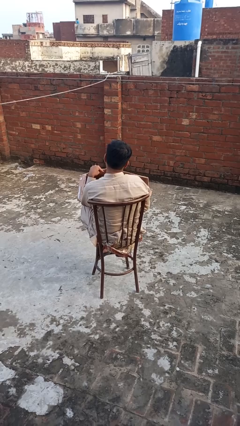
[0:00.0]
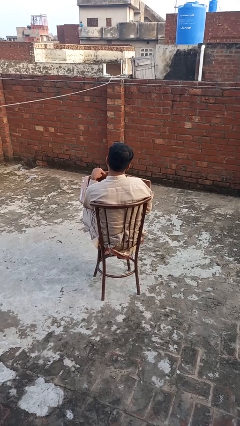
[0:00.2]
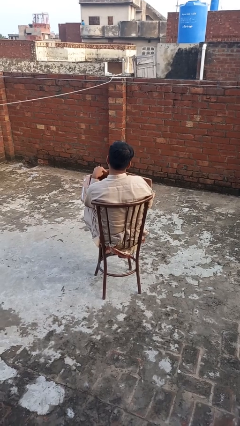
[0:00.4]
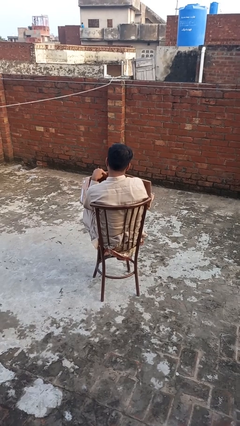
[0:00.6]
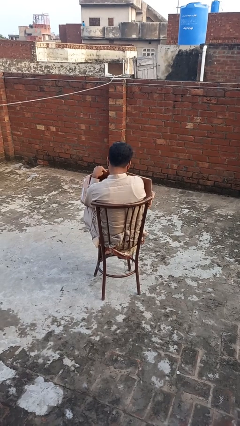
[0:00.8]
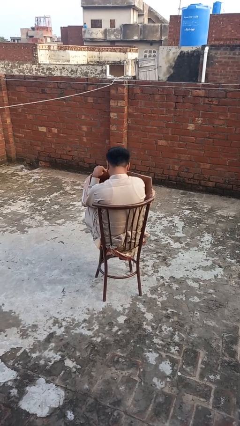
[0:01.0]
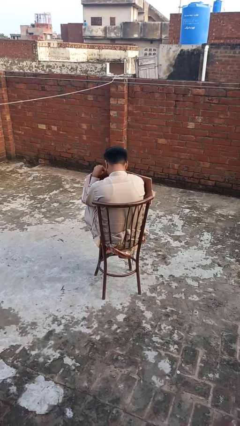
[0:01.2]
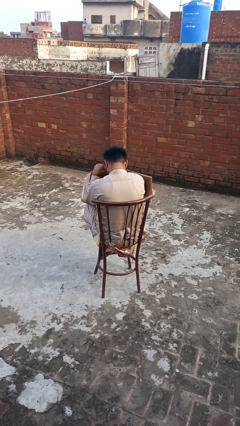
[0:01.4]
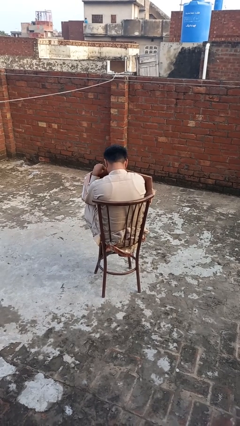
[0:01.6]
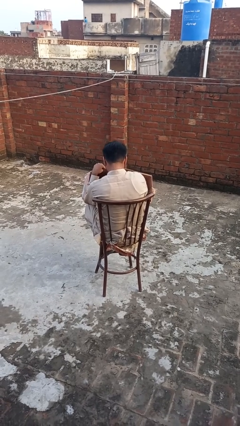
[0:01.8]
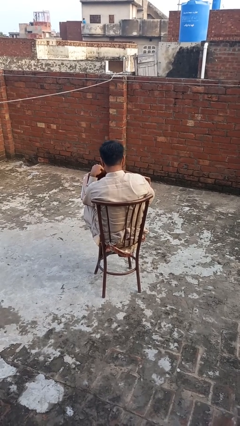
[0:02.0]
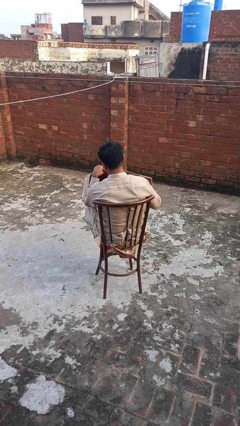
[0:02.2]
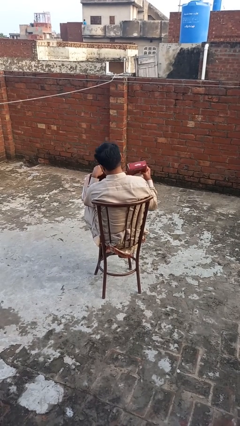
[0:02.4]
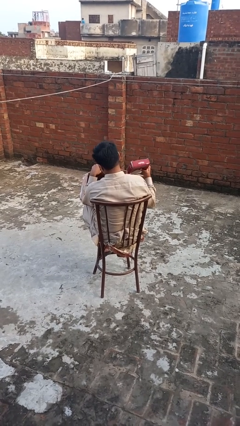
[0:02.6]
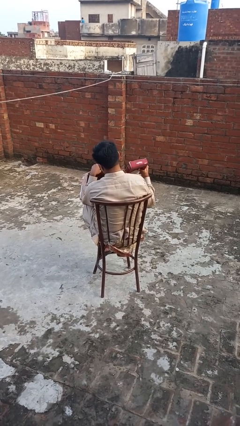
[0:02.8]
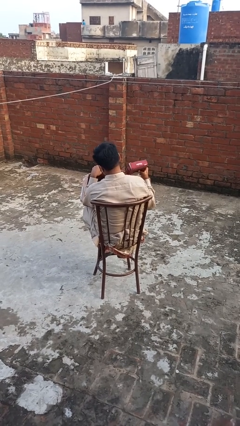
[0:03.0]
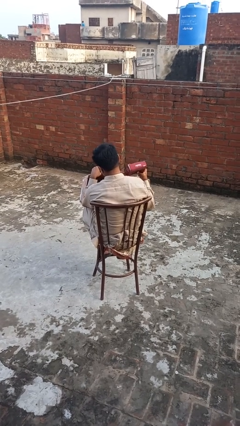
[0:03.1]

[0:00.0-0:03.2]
person searches in box

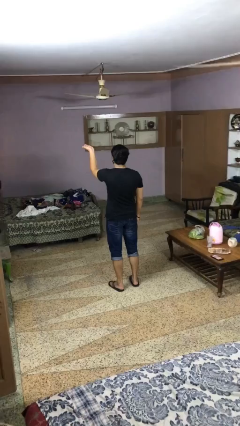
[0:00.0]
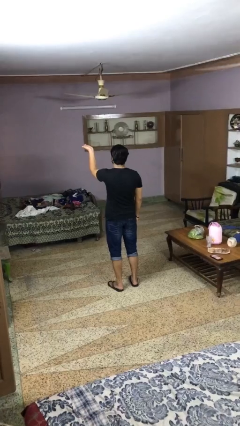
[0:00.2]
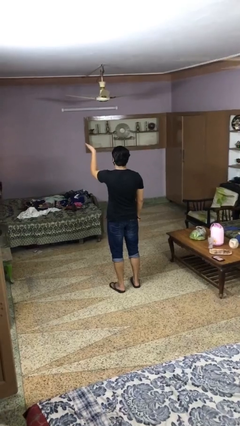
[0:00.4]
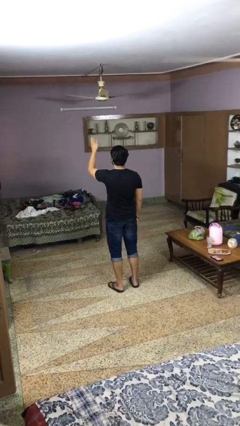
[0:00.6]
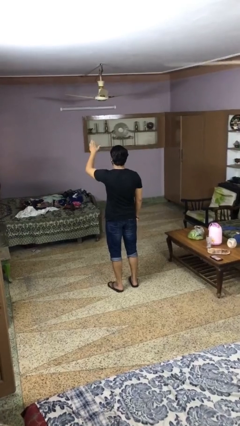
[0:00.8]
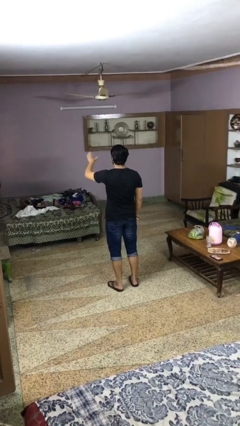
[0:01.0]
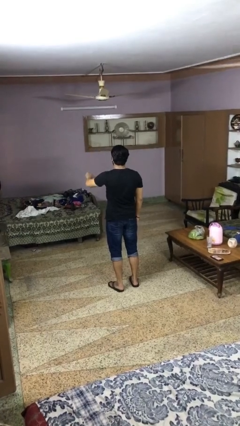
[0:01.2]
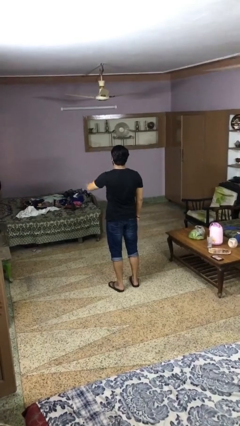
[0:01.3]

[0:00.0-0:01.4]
person gestures swipe down

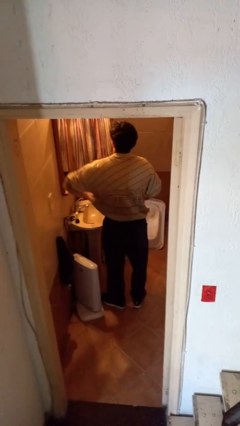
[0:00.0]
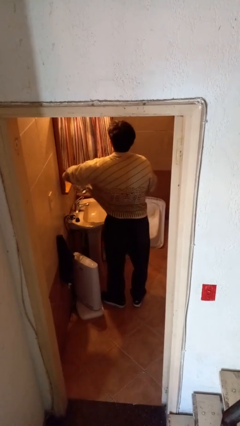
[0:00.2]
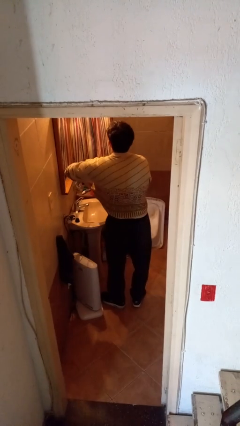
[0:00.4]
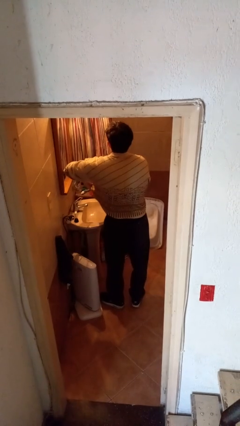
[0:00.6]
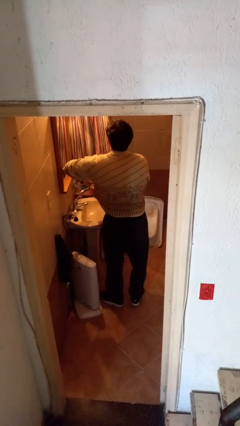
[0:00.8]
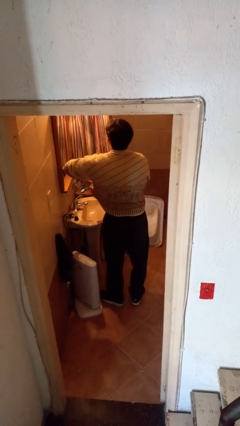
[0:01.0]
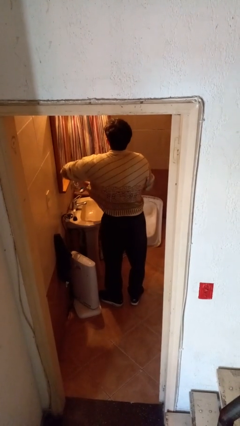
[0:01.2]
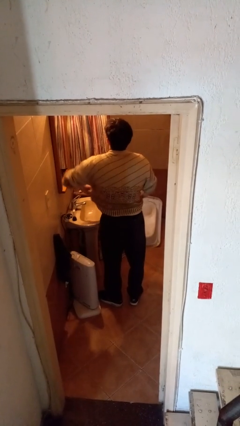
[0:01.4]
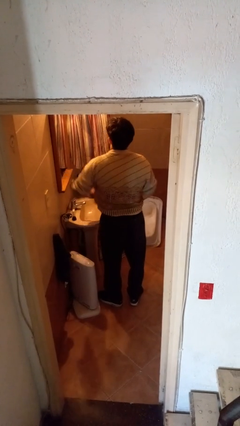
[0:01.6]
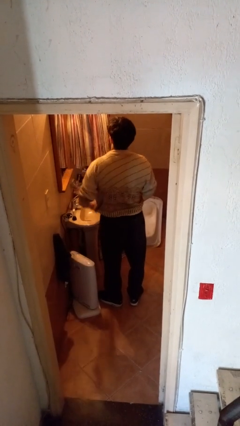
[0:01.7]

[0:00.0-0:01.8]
person applies deodorant

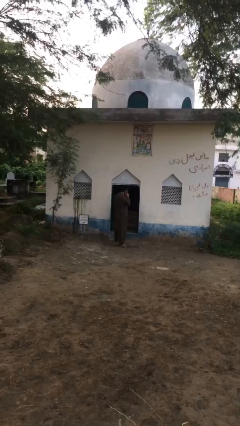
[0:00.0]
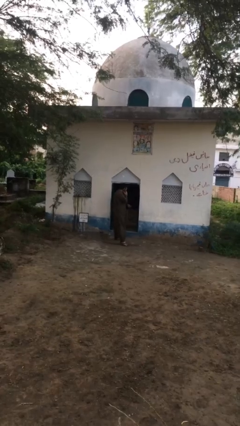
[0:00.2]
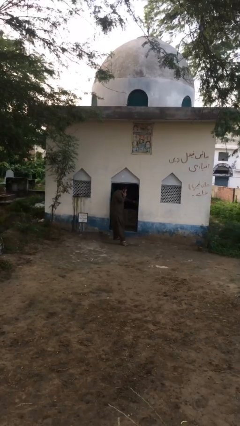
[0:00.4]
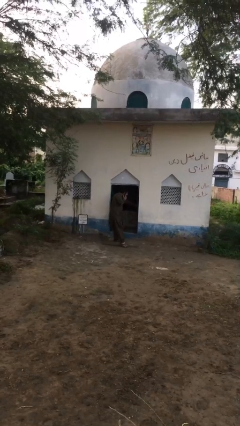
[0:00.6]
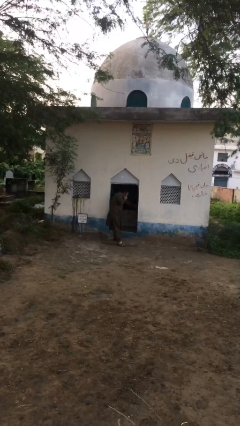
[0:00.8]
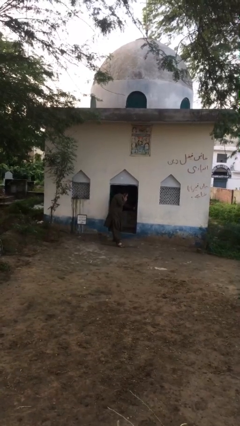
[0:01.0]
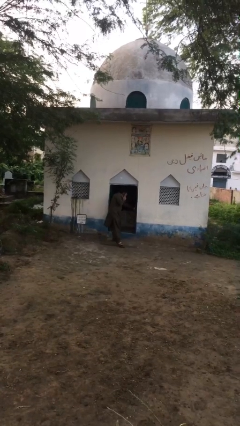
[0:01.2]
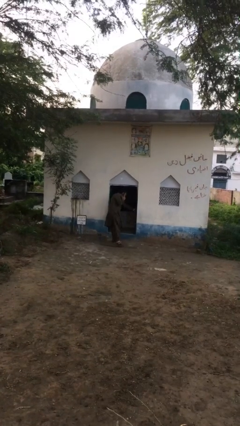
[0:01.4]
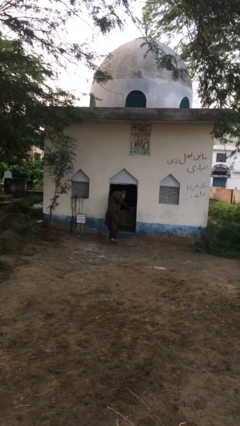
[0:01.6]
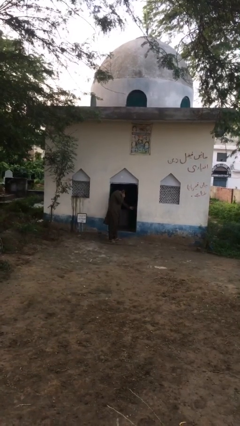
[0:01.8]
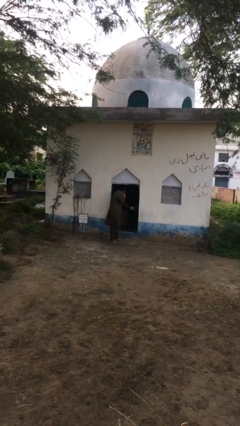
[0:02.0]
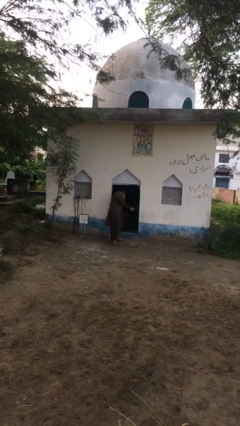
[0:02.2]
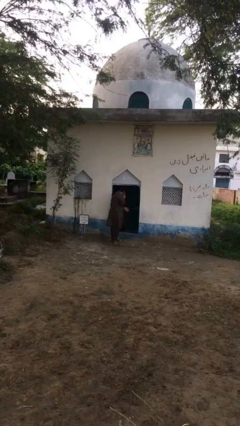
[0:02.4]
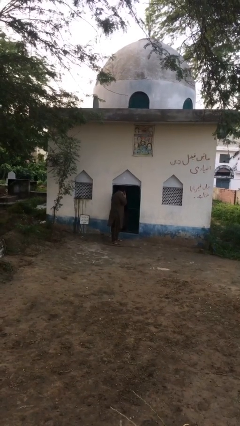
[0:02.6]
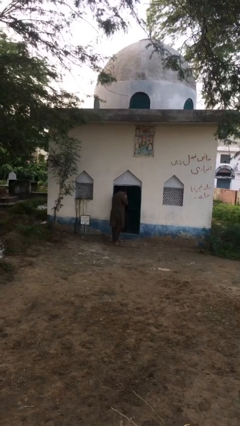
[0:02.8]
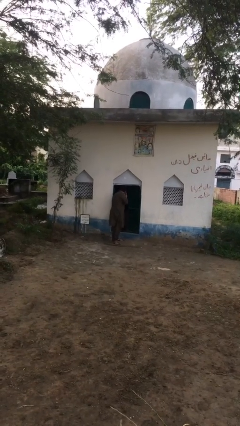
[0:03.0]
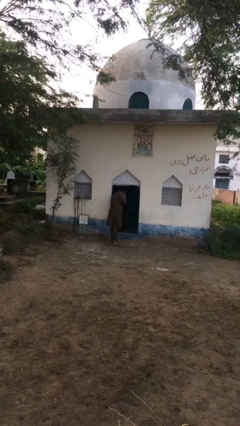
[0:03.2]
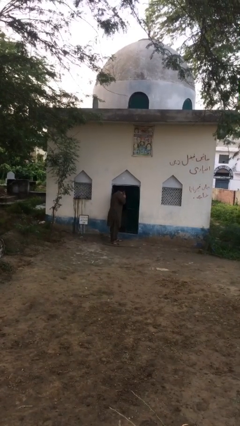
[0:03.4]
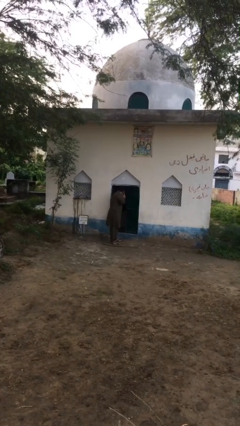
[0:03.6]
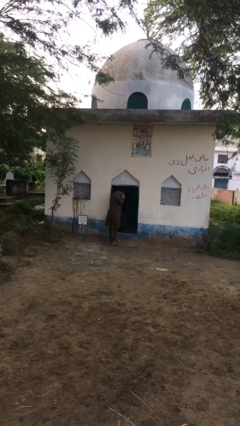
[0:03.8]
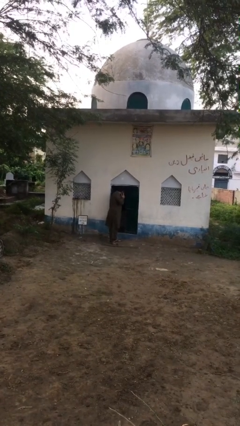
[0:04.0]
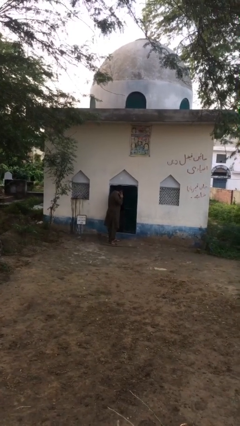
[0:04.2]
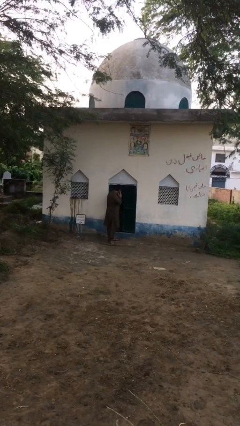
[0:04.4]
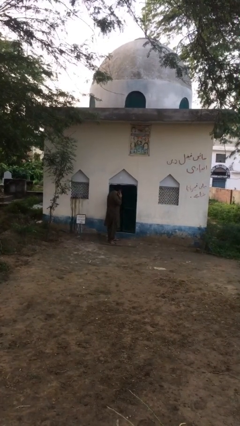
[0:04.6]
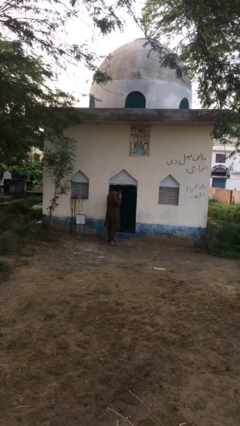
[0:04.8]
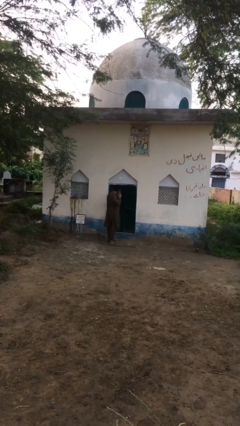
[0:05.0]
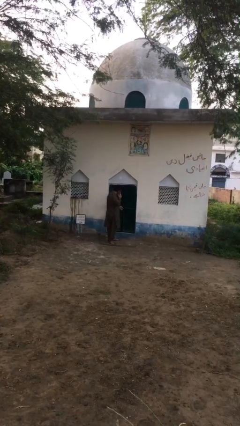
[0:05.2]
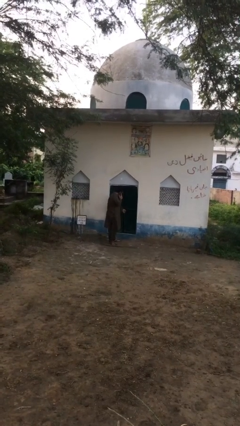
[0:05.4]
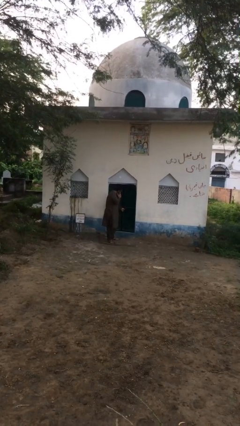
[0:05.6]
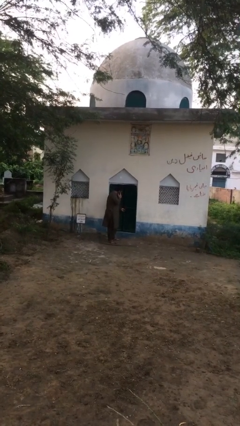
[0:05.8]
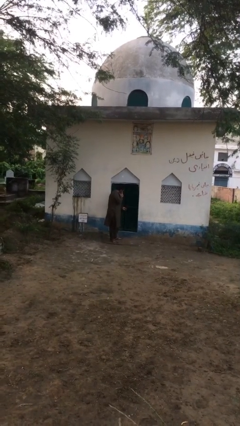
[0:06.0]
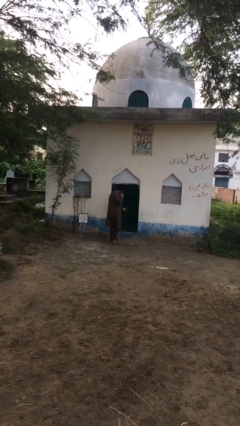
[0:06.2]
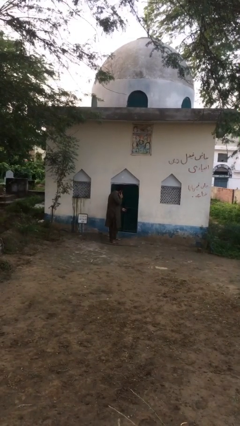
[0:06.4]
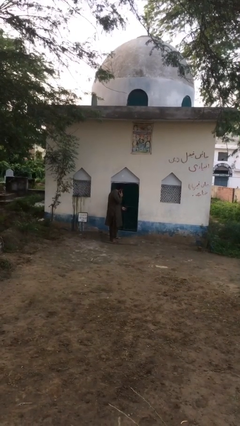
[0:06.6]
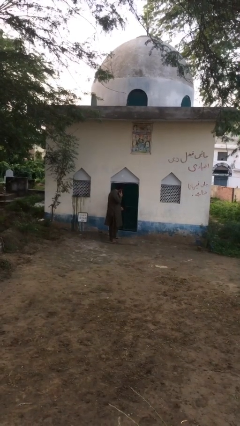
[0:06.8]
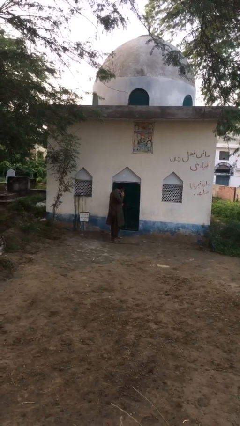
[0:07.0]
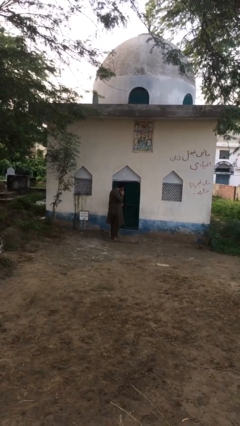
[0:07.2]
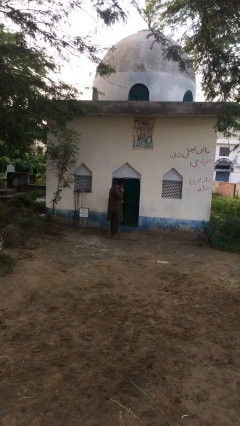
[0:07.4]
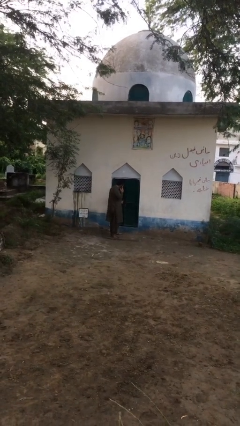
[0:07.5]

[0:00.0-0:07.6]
person closes facility door

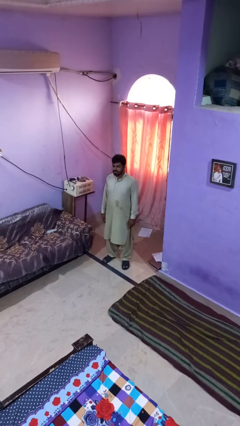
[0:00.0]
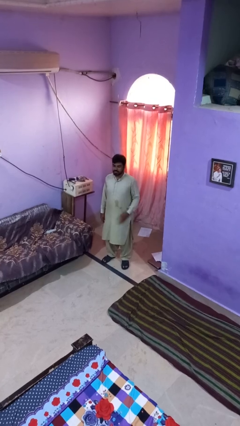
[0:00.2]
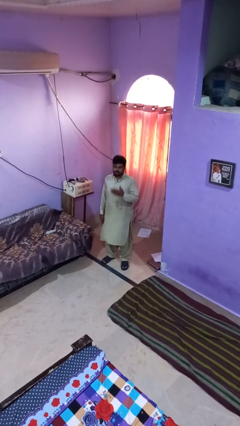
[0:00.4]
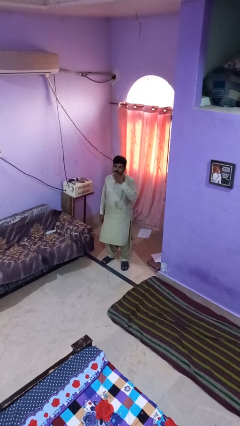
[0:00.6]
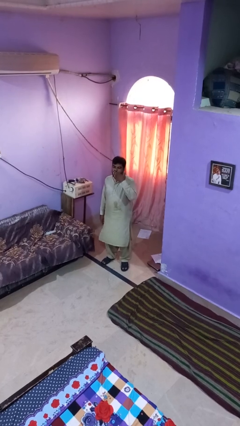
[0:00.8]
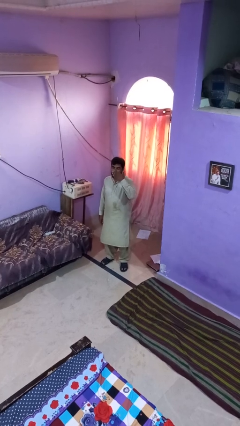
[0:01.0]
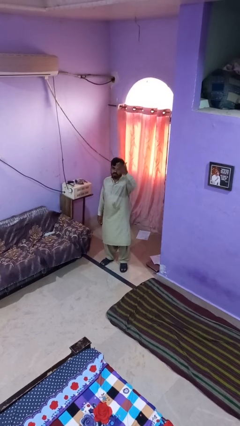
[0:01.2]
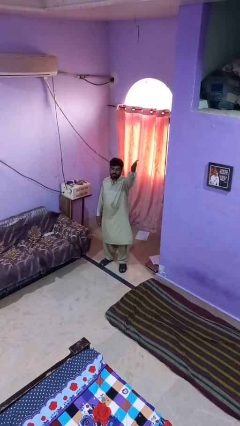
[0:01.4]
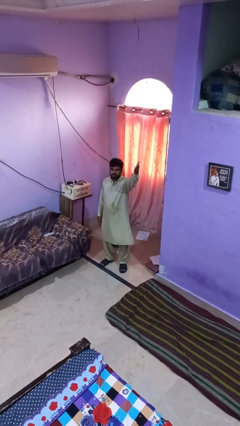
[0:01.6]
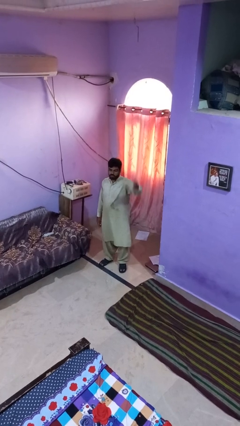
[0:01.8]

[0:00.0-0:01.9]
person gestures blow kiss

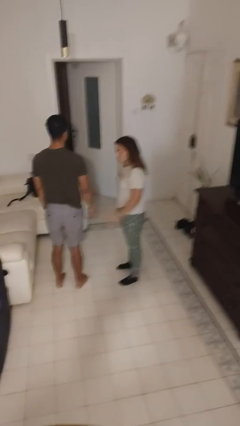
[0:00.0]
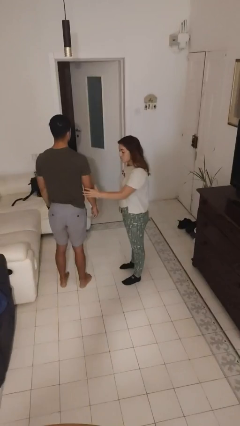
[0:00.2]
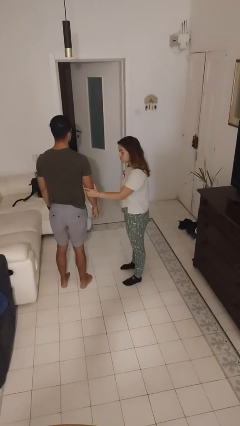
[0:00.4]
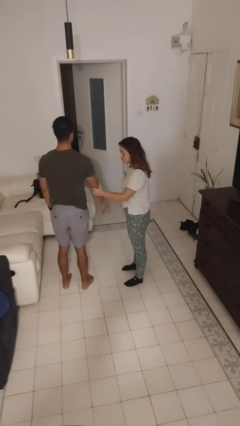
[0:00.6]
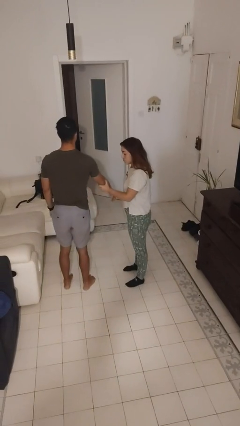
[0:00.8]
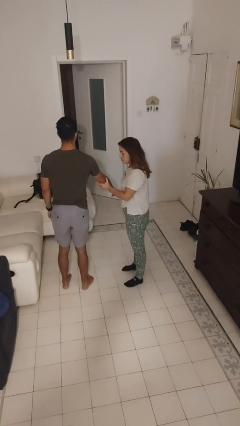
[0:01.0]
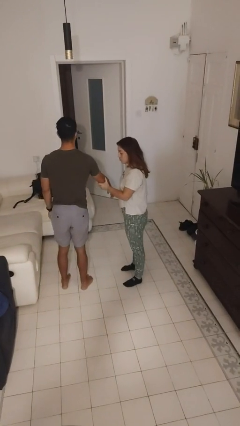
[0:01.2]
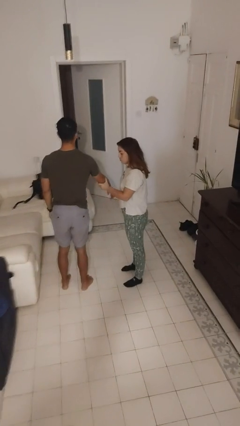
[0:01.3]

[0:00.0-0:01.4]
person grabs person by forearm

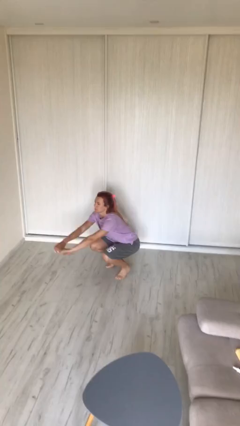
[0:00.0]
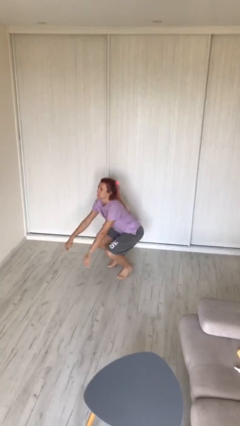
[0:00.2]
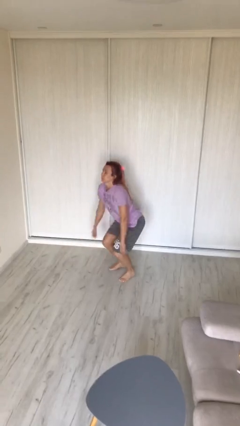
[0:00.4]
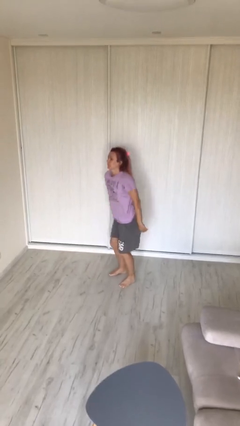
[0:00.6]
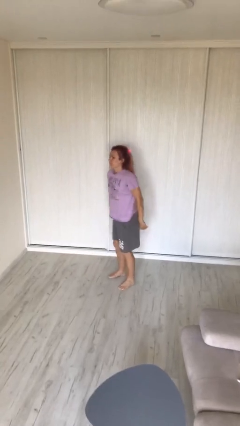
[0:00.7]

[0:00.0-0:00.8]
person stands up
